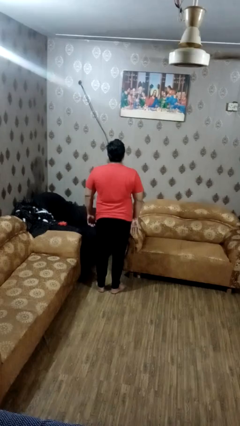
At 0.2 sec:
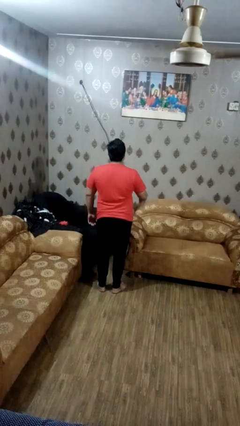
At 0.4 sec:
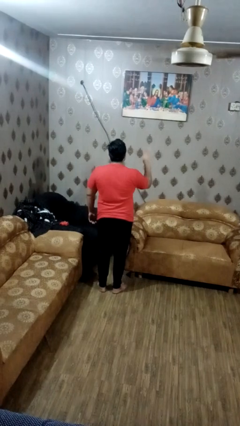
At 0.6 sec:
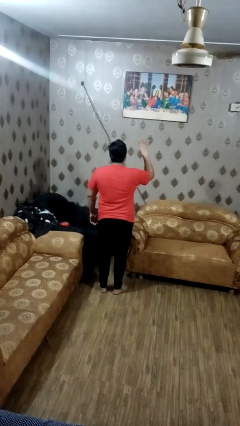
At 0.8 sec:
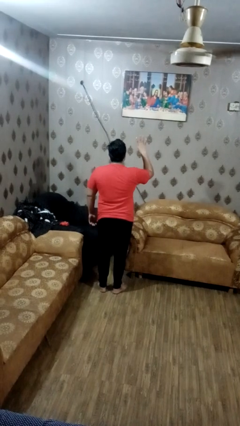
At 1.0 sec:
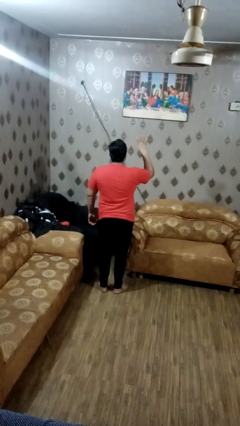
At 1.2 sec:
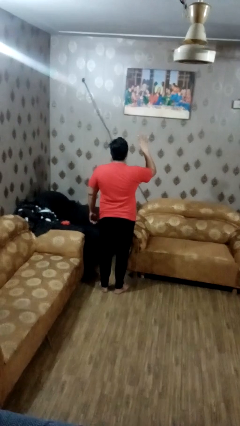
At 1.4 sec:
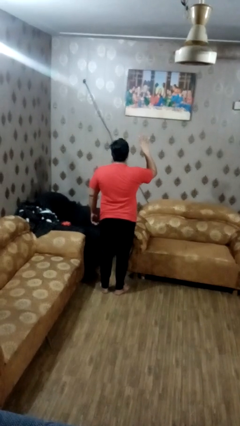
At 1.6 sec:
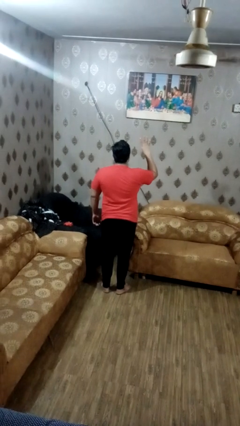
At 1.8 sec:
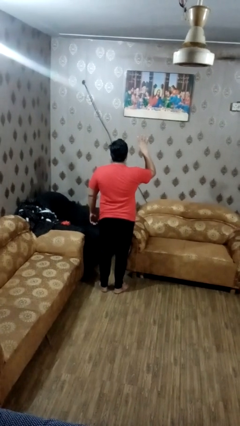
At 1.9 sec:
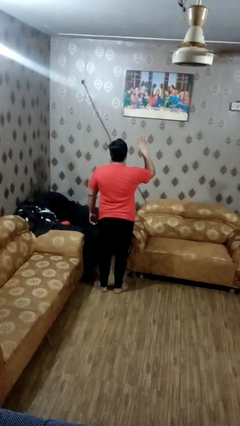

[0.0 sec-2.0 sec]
person gestures number four

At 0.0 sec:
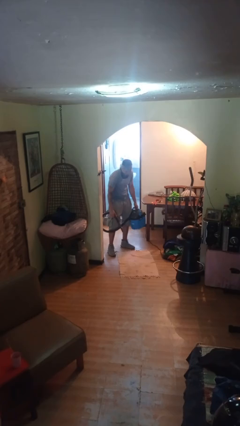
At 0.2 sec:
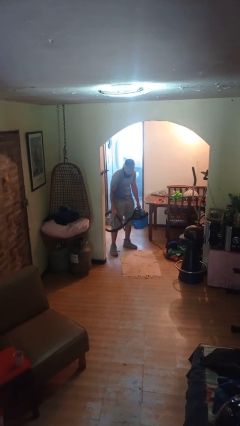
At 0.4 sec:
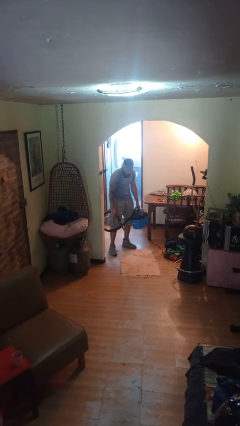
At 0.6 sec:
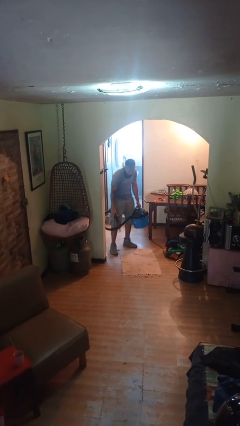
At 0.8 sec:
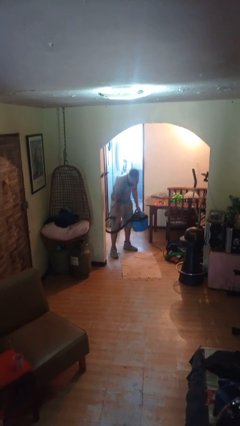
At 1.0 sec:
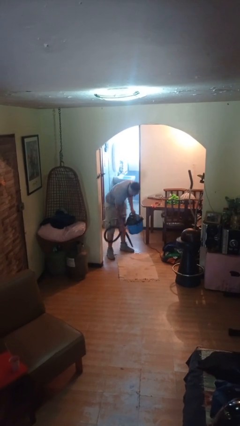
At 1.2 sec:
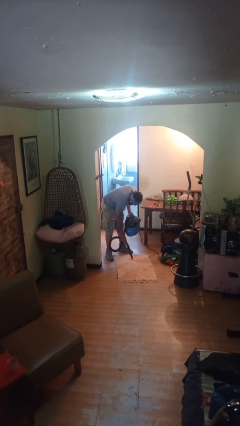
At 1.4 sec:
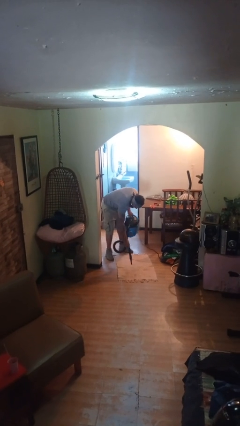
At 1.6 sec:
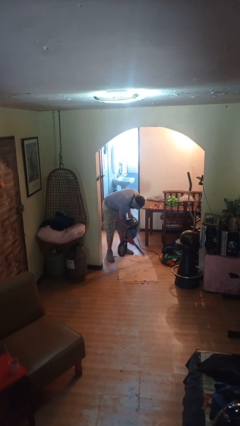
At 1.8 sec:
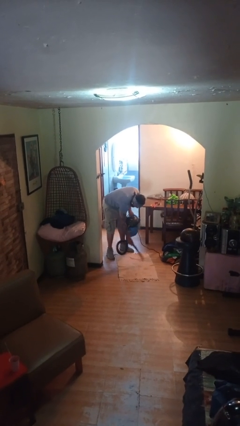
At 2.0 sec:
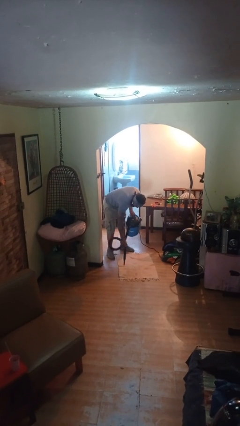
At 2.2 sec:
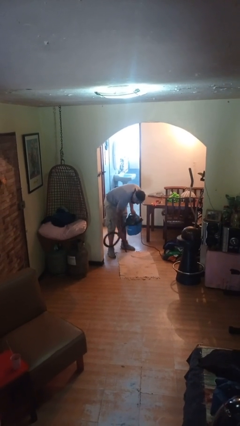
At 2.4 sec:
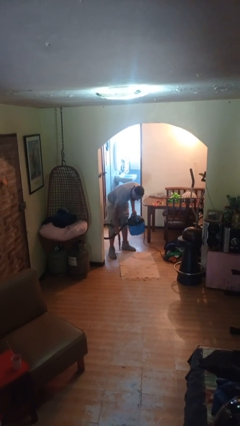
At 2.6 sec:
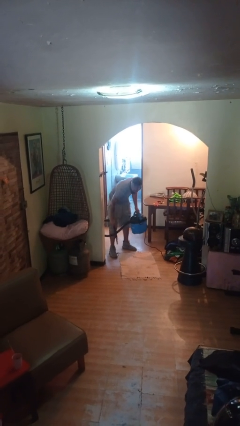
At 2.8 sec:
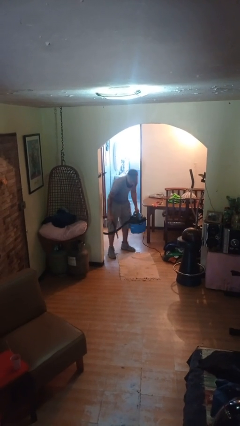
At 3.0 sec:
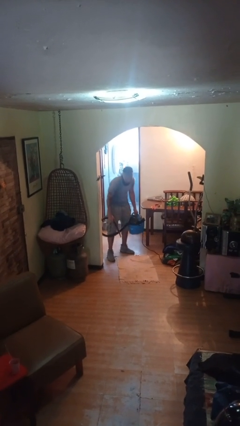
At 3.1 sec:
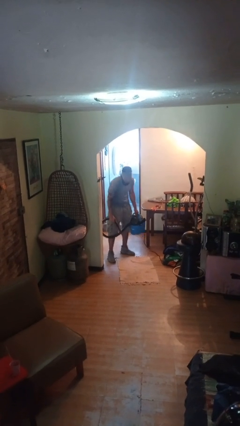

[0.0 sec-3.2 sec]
person vacuums carpet

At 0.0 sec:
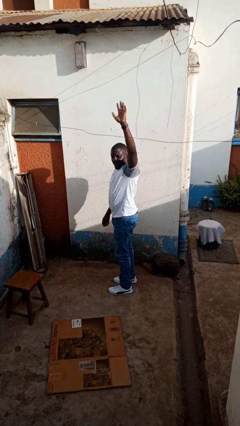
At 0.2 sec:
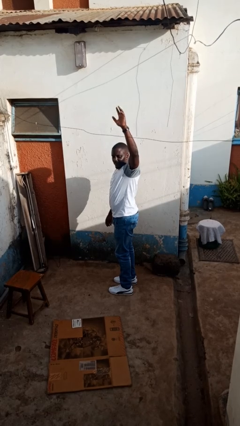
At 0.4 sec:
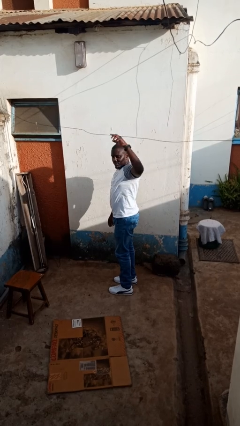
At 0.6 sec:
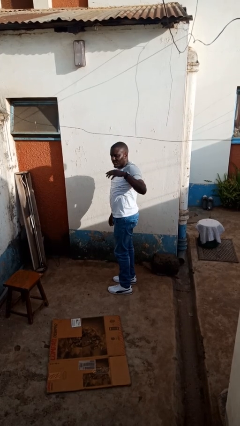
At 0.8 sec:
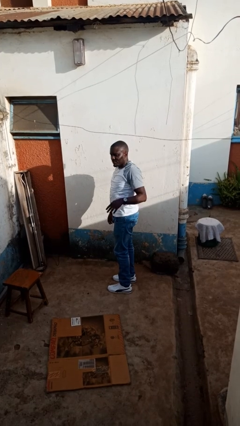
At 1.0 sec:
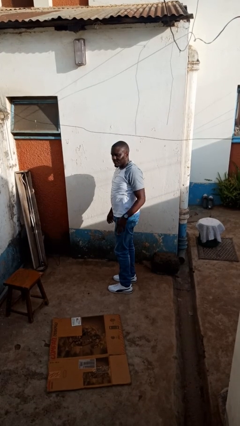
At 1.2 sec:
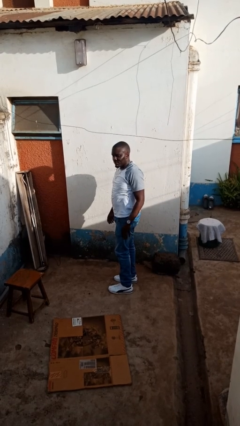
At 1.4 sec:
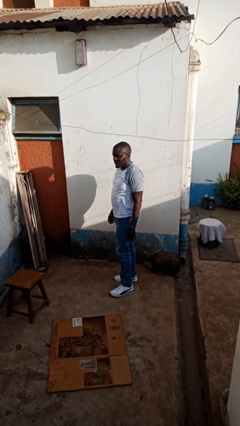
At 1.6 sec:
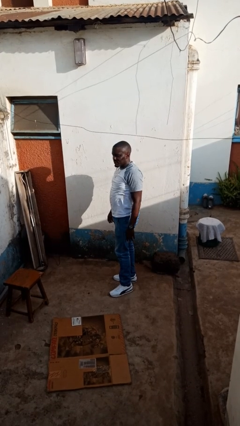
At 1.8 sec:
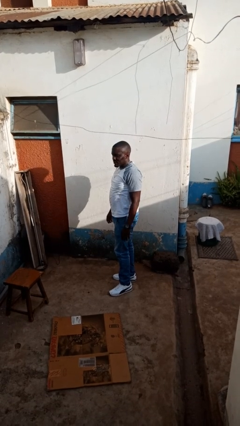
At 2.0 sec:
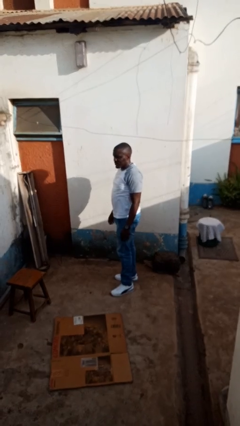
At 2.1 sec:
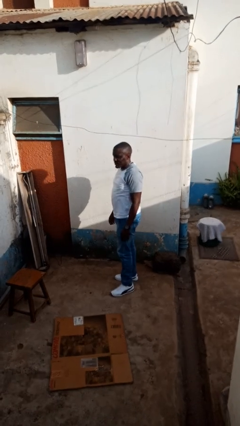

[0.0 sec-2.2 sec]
person gestures lower hand

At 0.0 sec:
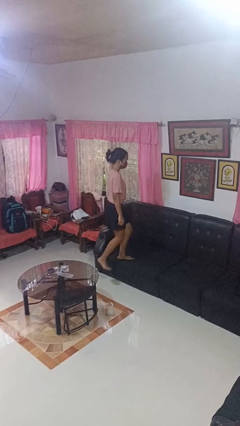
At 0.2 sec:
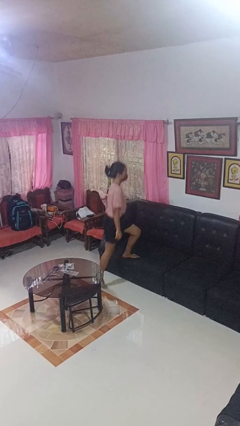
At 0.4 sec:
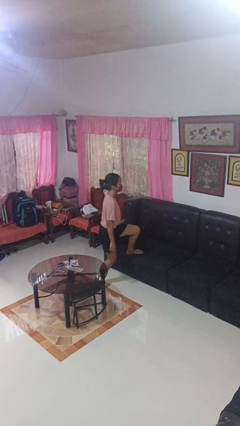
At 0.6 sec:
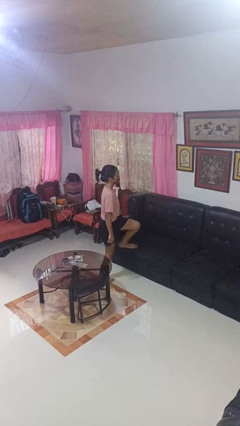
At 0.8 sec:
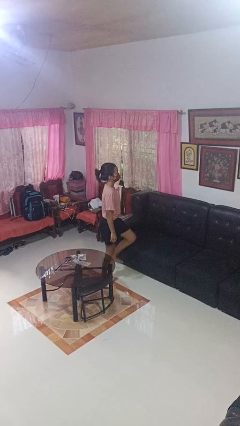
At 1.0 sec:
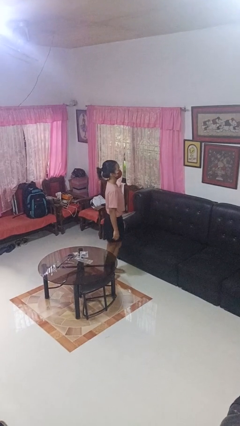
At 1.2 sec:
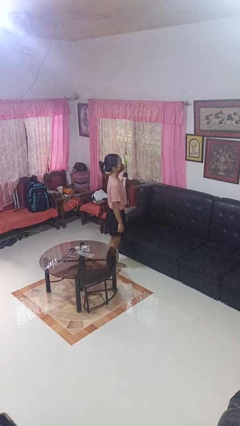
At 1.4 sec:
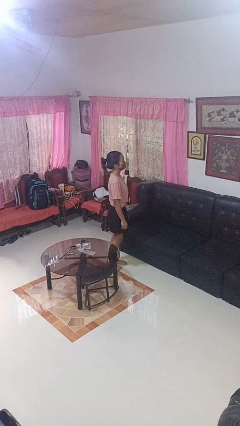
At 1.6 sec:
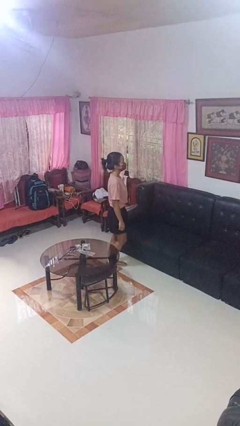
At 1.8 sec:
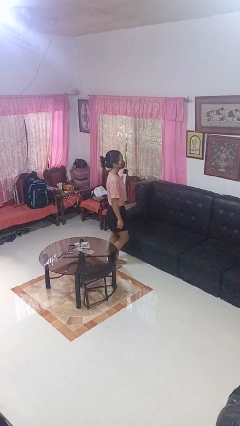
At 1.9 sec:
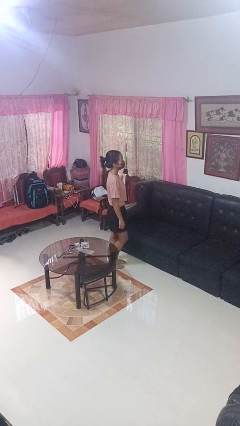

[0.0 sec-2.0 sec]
person climbs off couch

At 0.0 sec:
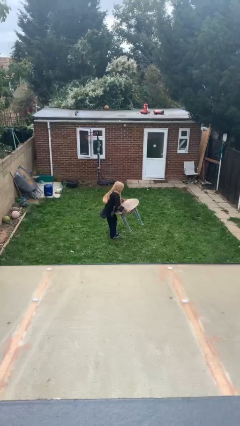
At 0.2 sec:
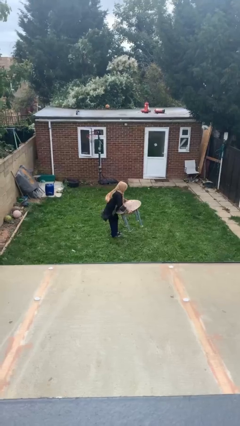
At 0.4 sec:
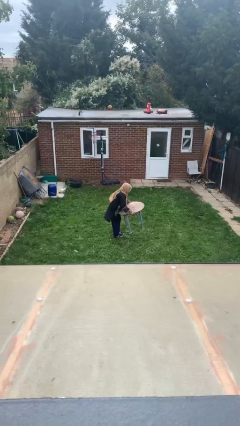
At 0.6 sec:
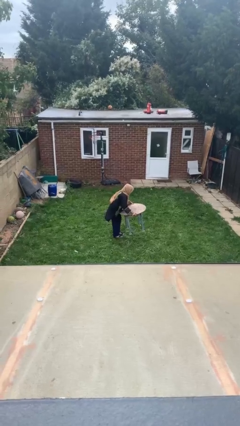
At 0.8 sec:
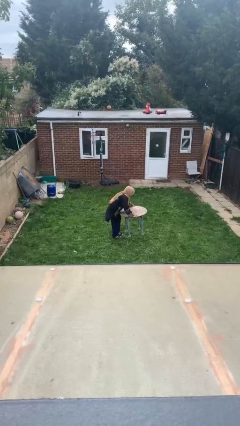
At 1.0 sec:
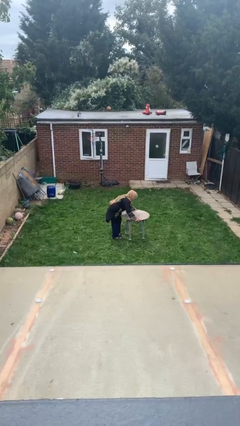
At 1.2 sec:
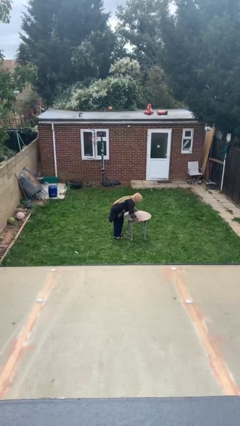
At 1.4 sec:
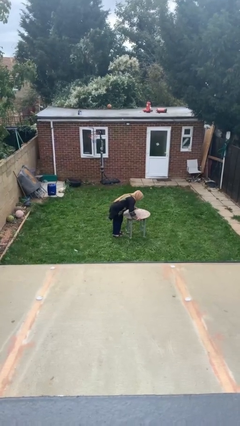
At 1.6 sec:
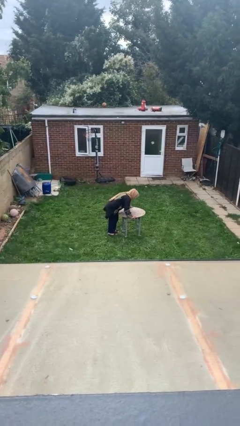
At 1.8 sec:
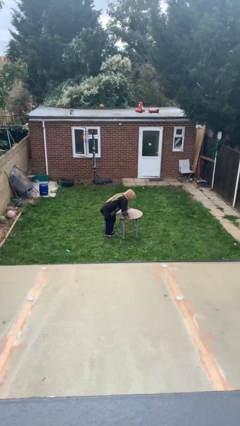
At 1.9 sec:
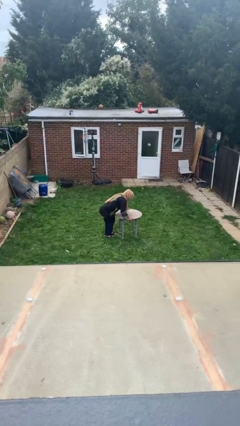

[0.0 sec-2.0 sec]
person puts down object on floor

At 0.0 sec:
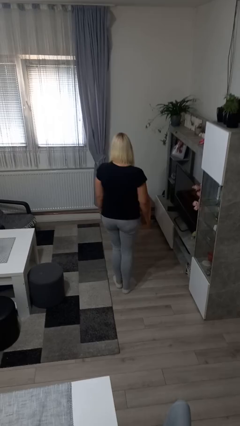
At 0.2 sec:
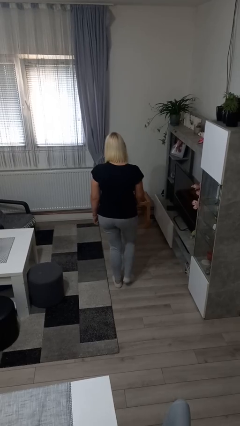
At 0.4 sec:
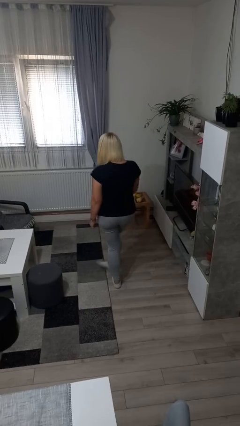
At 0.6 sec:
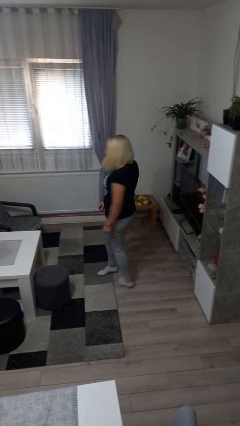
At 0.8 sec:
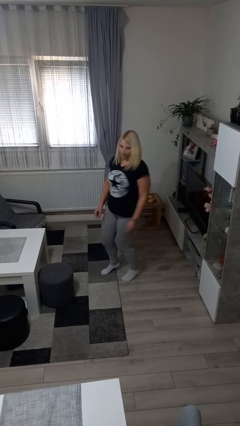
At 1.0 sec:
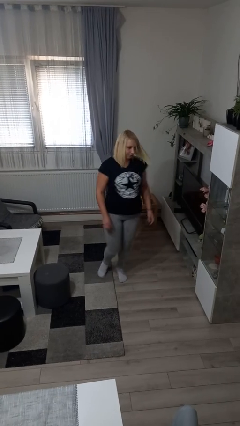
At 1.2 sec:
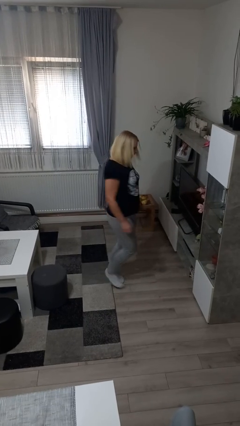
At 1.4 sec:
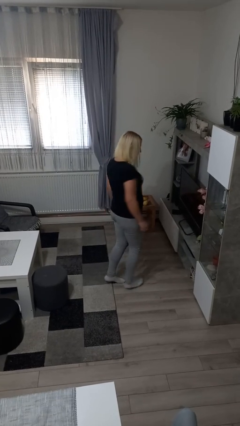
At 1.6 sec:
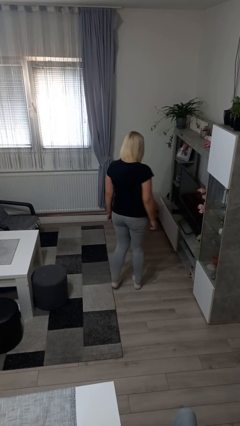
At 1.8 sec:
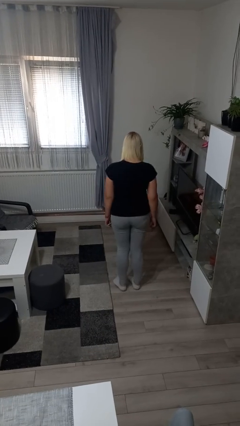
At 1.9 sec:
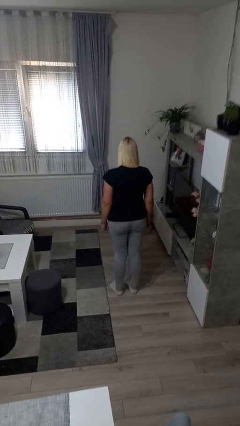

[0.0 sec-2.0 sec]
person twirls

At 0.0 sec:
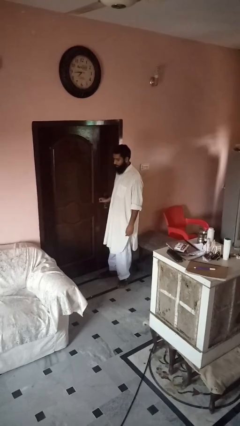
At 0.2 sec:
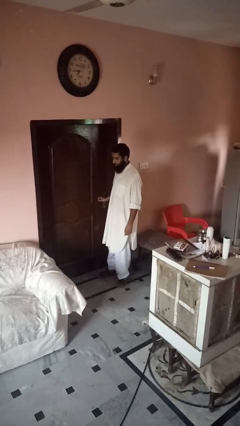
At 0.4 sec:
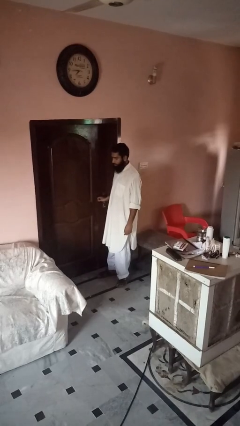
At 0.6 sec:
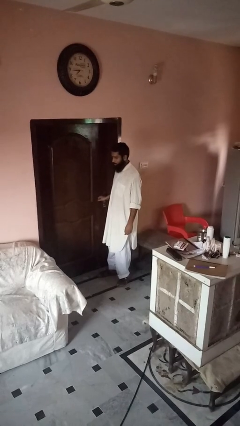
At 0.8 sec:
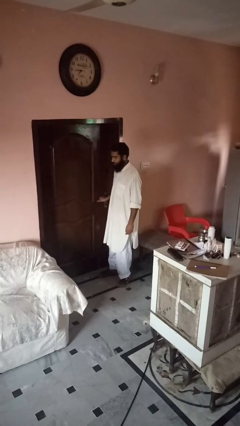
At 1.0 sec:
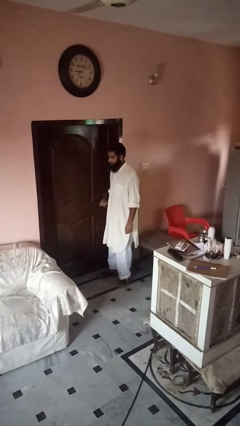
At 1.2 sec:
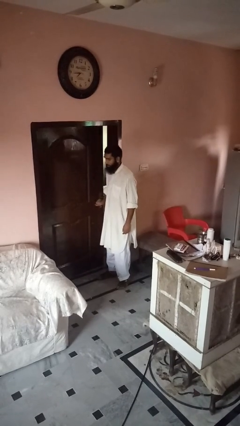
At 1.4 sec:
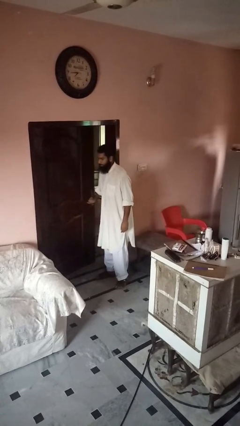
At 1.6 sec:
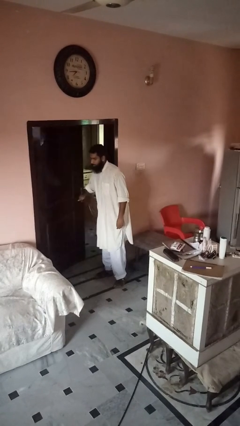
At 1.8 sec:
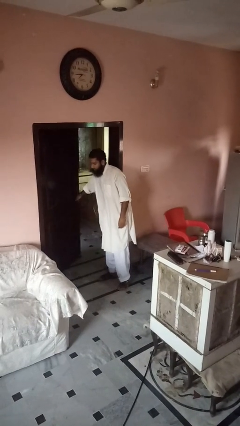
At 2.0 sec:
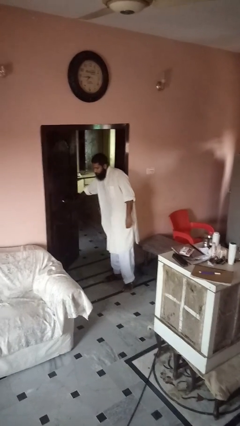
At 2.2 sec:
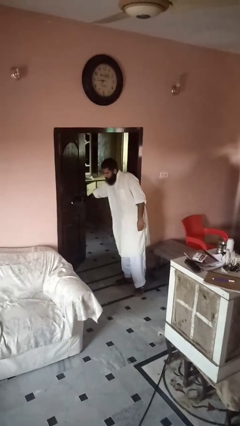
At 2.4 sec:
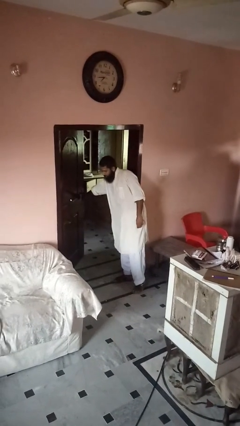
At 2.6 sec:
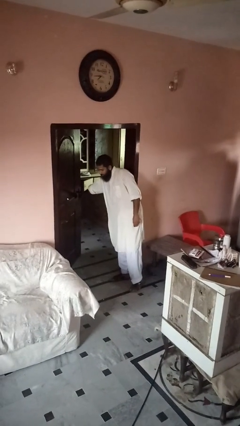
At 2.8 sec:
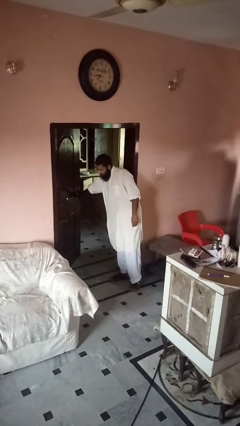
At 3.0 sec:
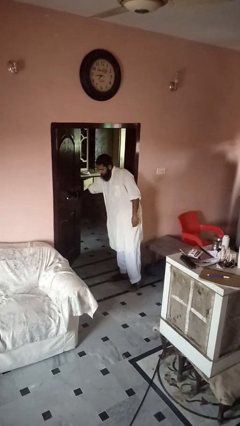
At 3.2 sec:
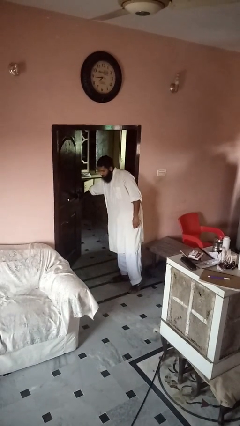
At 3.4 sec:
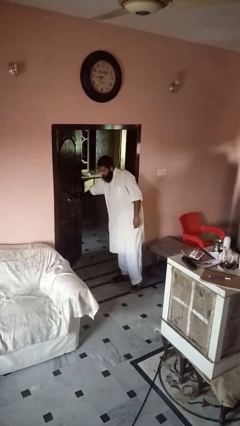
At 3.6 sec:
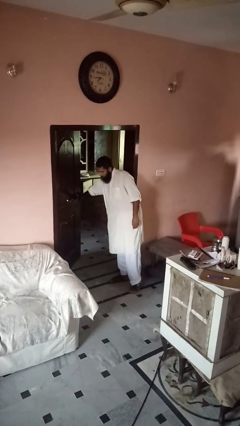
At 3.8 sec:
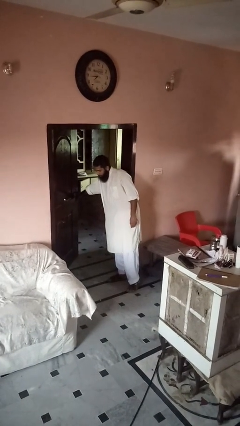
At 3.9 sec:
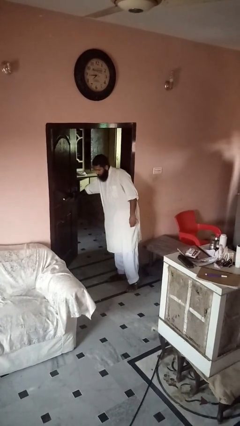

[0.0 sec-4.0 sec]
person opens gate
